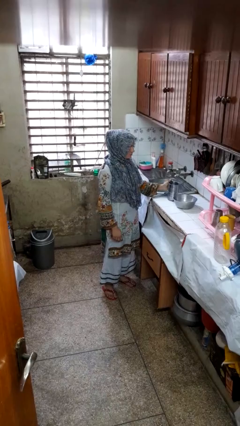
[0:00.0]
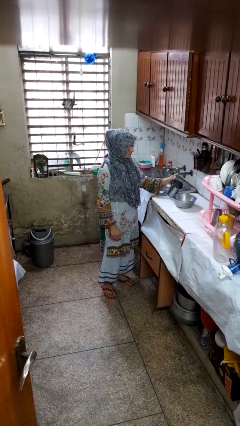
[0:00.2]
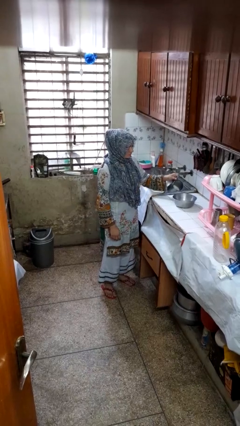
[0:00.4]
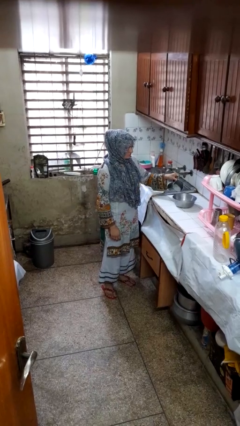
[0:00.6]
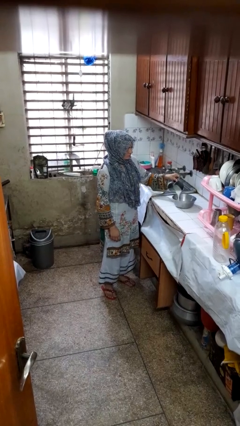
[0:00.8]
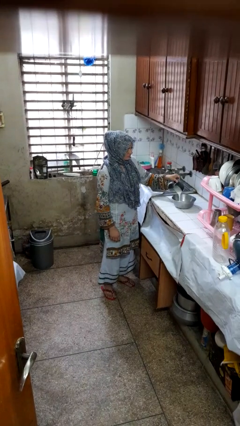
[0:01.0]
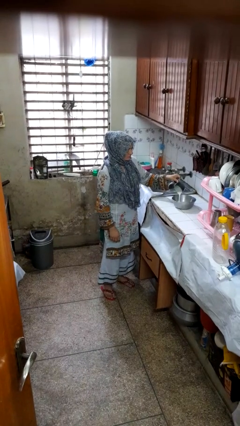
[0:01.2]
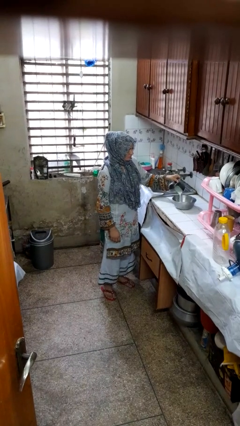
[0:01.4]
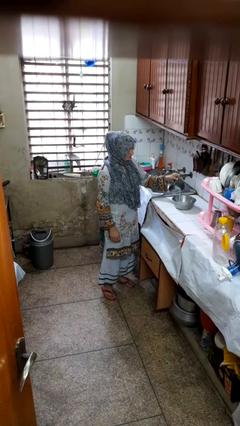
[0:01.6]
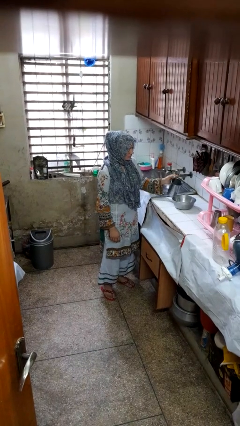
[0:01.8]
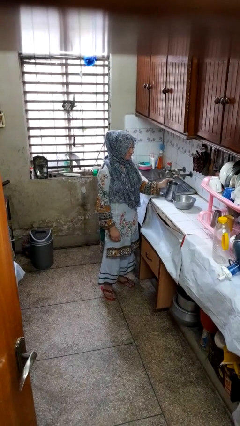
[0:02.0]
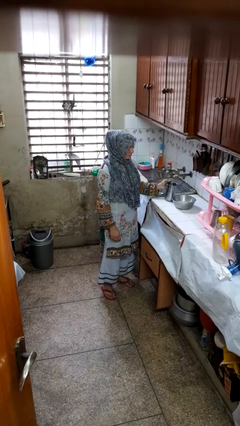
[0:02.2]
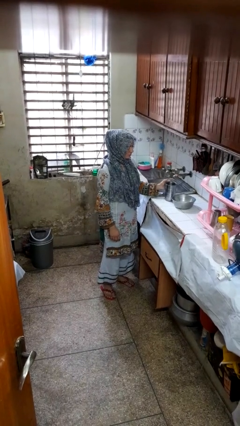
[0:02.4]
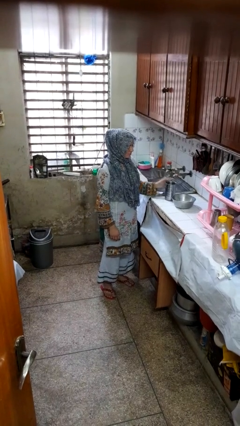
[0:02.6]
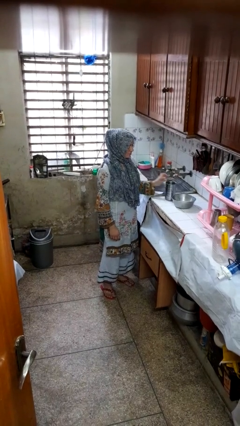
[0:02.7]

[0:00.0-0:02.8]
person pours into bowl

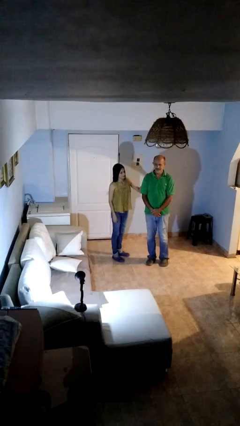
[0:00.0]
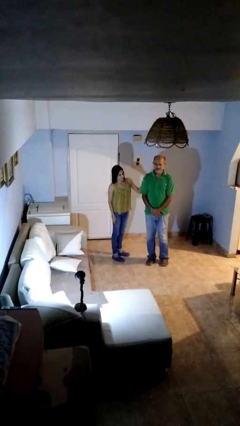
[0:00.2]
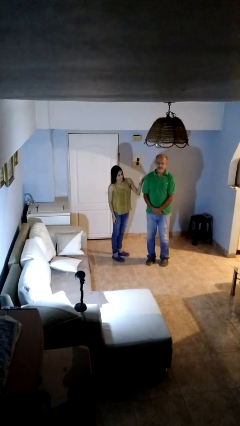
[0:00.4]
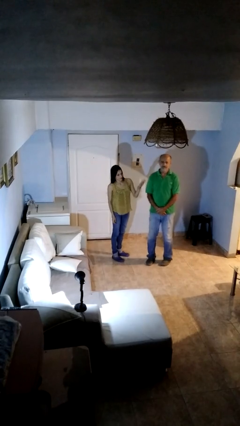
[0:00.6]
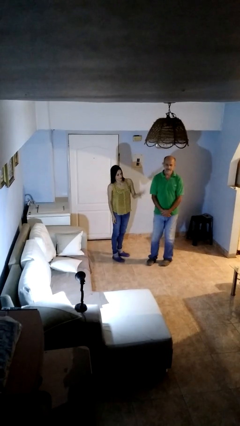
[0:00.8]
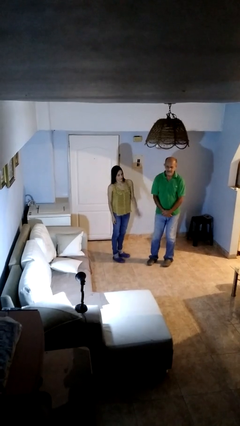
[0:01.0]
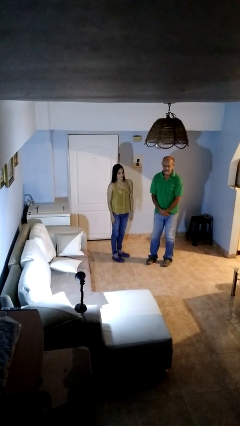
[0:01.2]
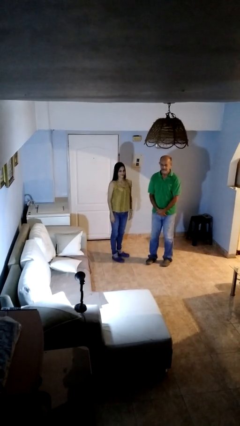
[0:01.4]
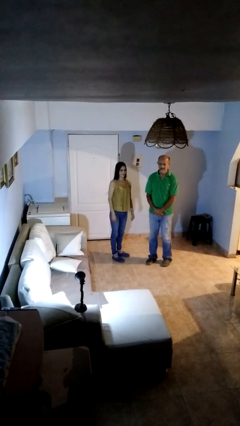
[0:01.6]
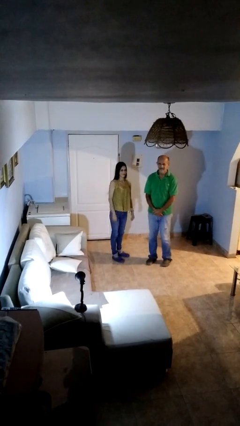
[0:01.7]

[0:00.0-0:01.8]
person shoves person

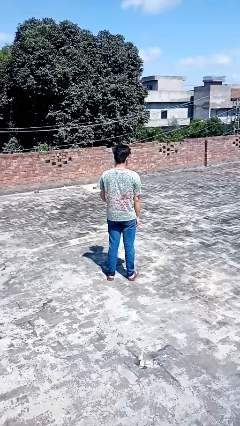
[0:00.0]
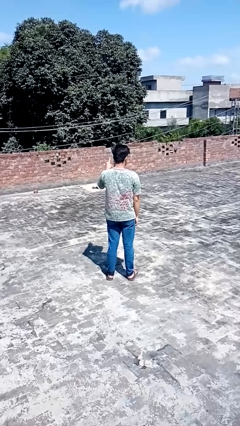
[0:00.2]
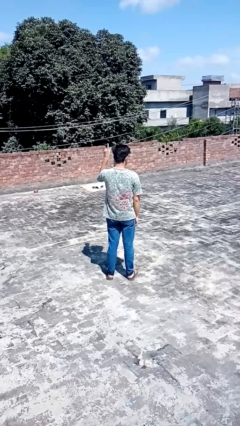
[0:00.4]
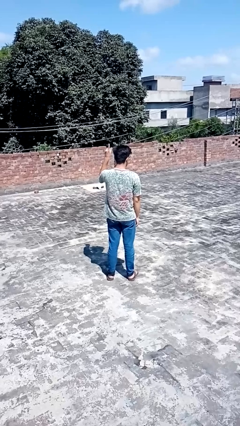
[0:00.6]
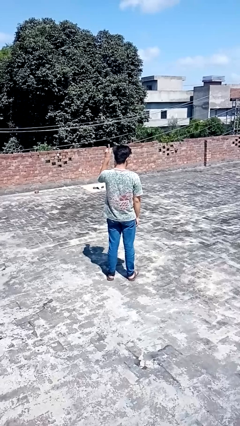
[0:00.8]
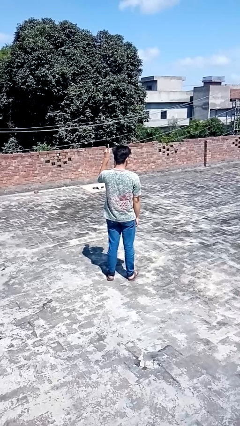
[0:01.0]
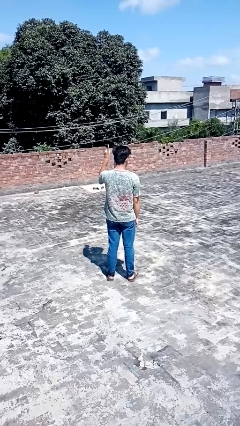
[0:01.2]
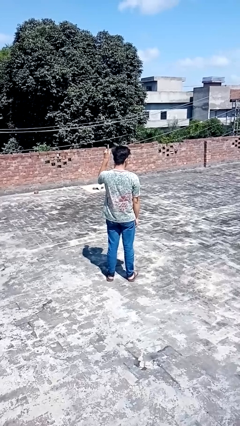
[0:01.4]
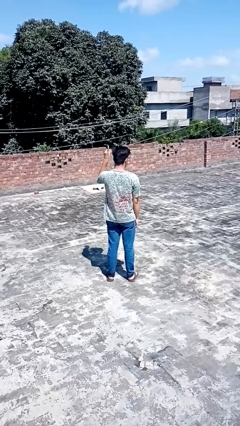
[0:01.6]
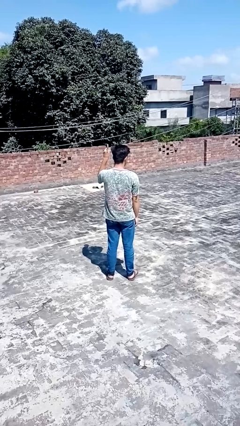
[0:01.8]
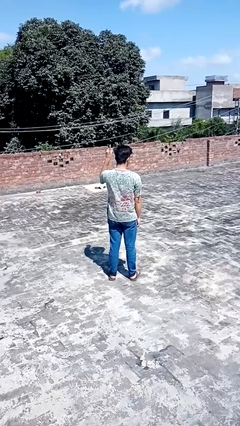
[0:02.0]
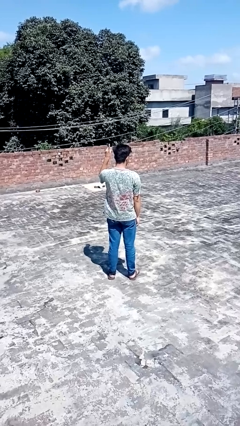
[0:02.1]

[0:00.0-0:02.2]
person gestures number one

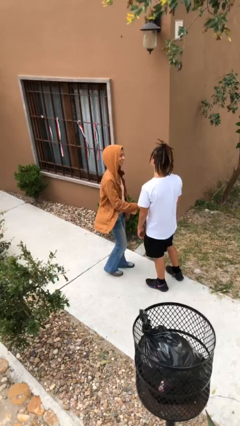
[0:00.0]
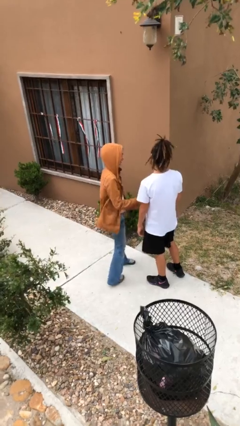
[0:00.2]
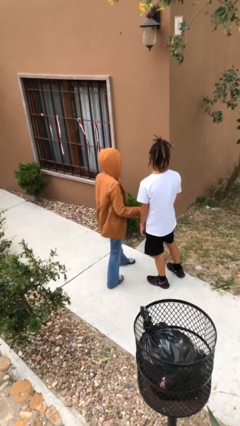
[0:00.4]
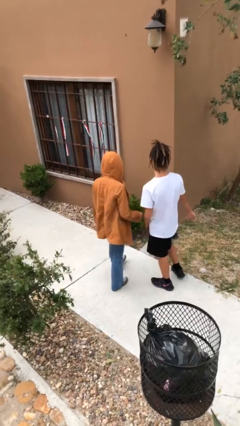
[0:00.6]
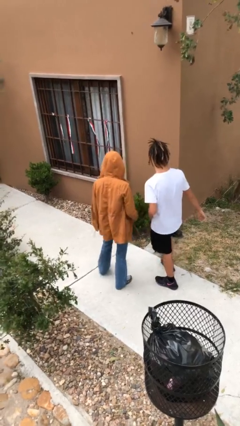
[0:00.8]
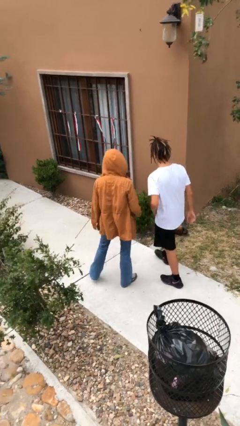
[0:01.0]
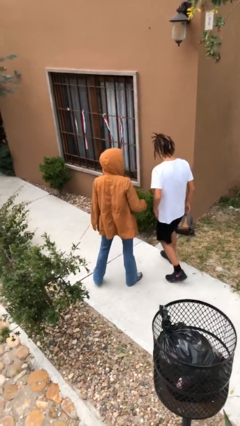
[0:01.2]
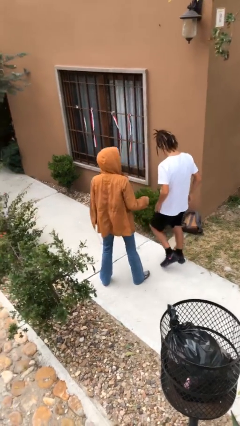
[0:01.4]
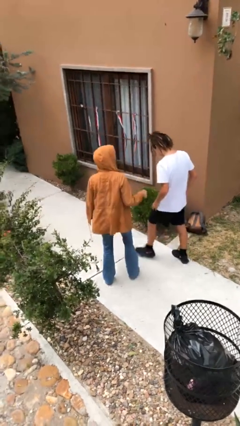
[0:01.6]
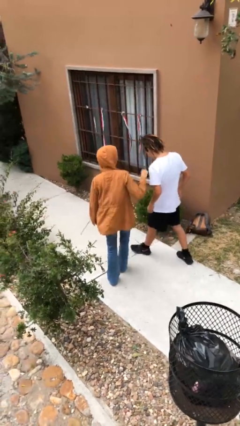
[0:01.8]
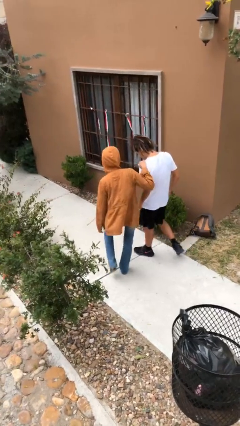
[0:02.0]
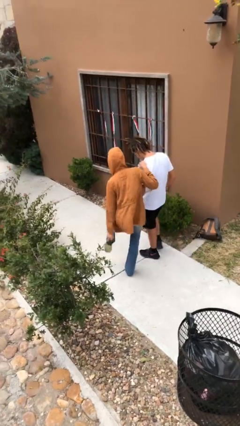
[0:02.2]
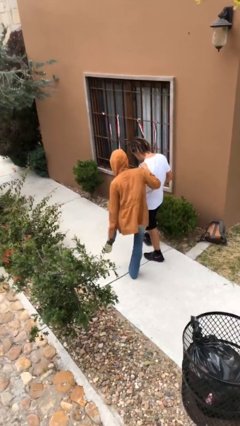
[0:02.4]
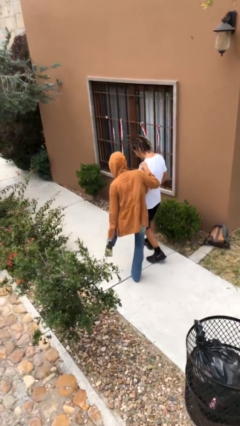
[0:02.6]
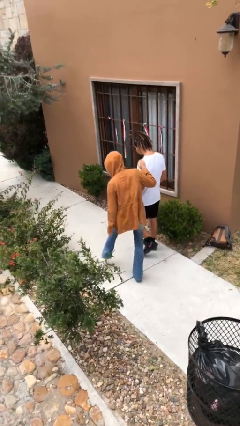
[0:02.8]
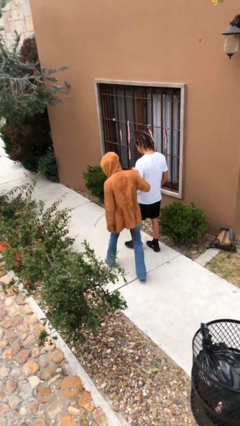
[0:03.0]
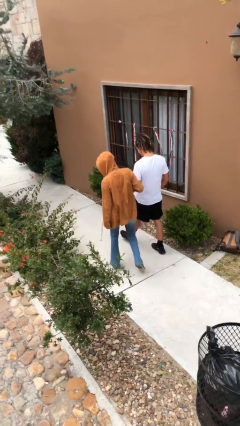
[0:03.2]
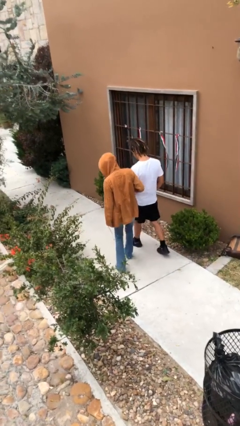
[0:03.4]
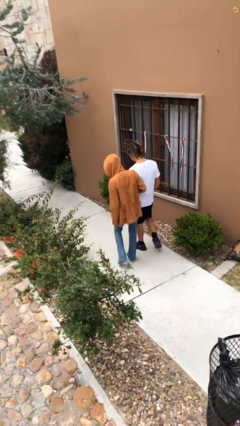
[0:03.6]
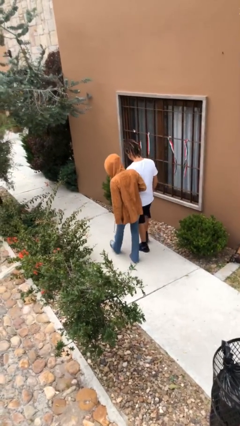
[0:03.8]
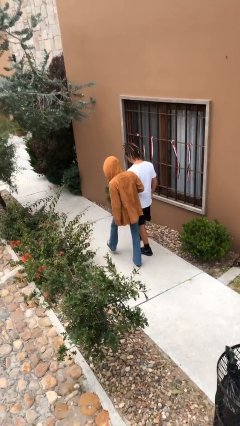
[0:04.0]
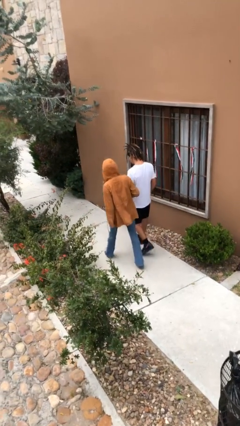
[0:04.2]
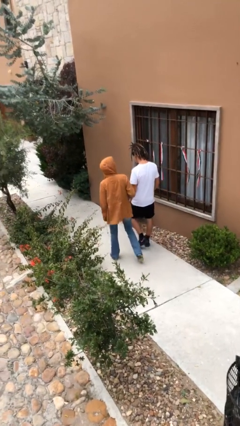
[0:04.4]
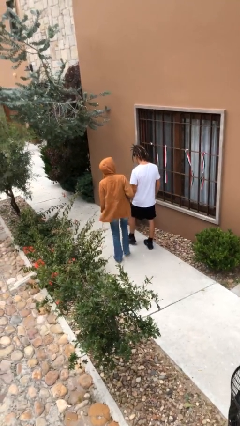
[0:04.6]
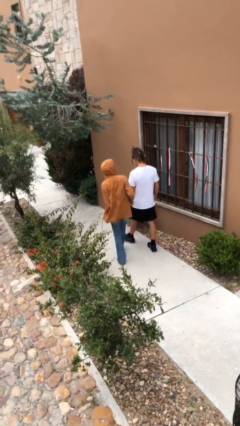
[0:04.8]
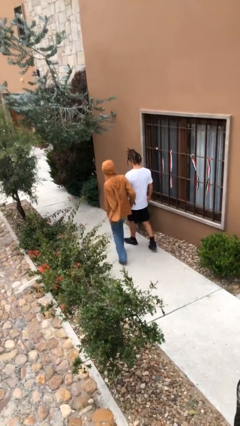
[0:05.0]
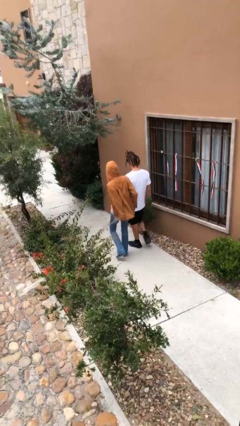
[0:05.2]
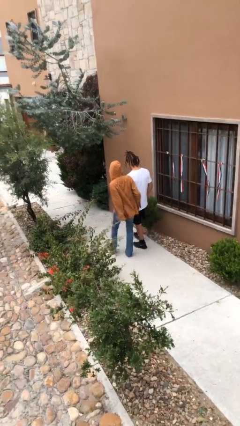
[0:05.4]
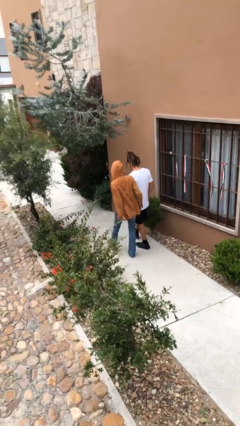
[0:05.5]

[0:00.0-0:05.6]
person talks to person

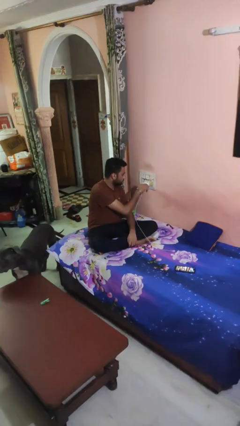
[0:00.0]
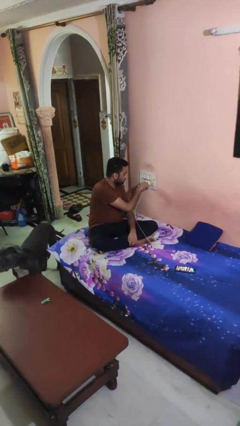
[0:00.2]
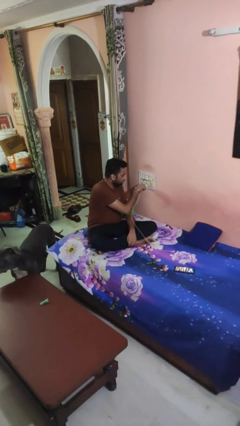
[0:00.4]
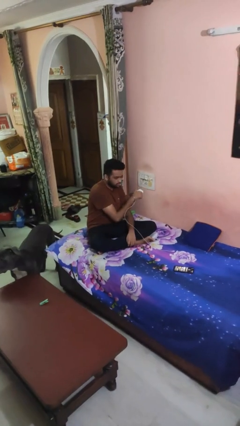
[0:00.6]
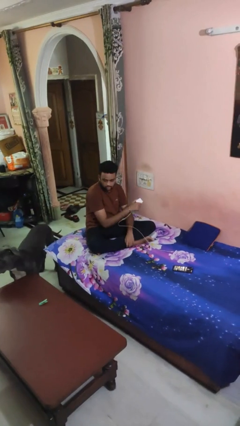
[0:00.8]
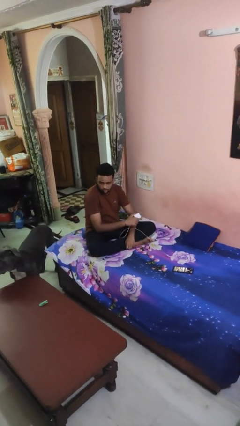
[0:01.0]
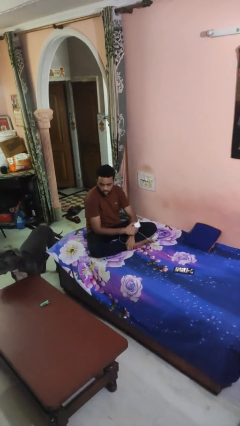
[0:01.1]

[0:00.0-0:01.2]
person unplugs from electrical socket

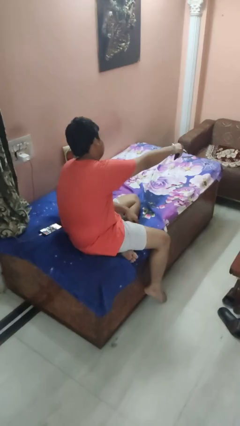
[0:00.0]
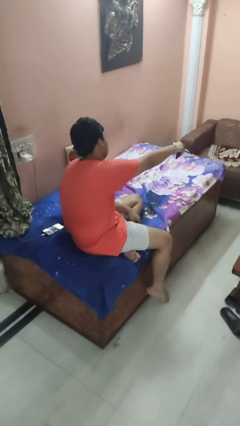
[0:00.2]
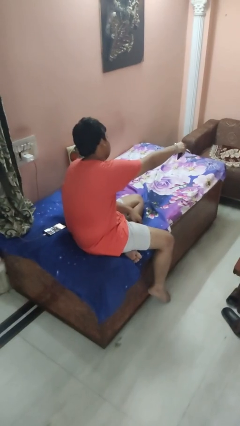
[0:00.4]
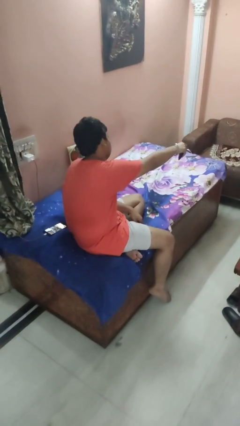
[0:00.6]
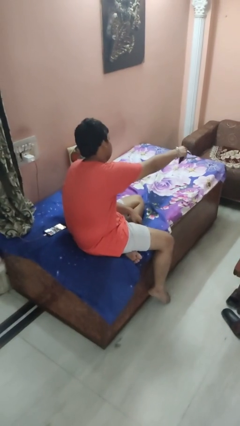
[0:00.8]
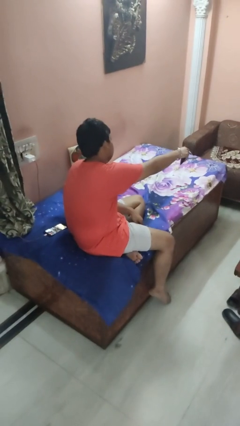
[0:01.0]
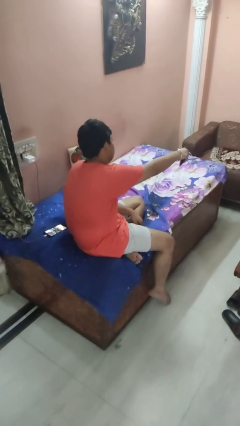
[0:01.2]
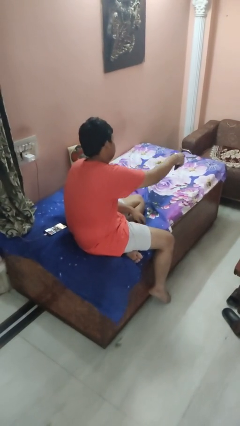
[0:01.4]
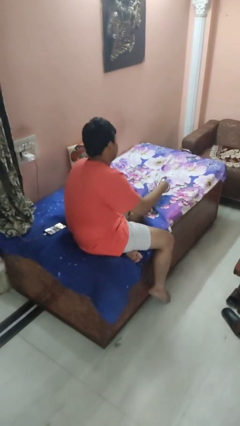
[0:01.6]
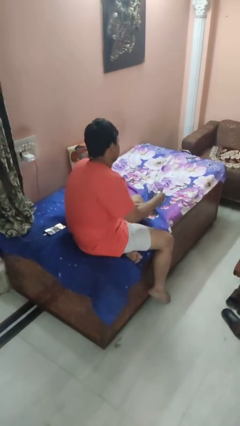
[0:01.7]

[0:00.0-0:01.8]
person uses television remote

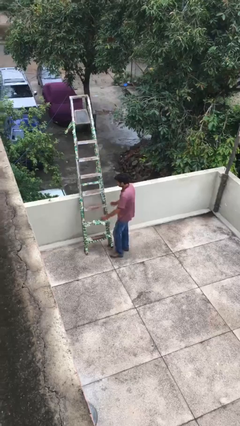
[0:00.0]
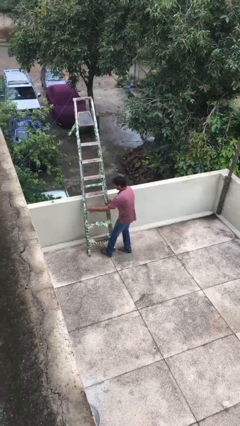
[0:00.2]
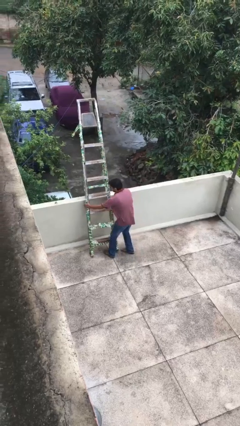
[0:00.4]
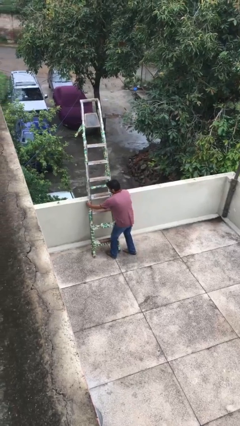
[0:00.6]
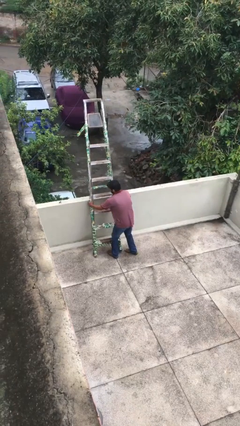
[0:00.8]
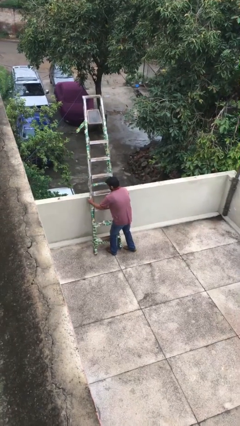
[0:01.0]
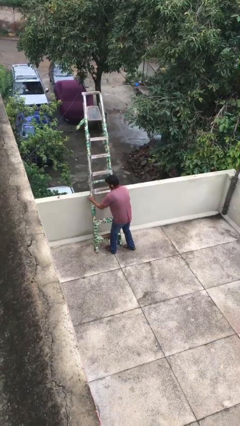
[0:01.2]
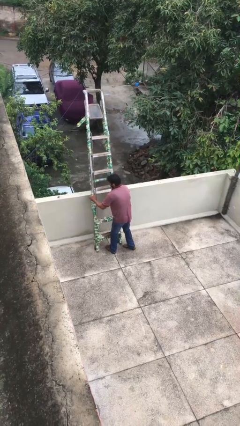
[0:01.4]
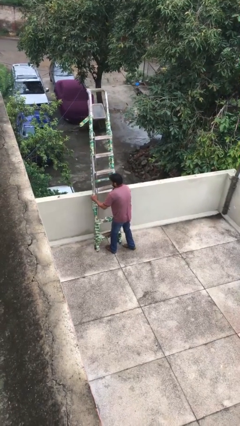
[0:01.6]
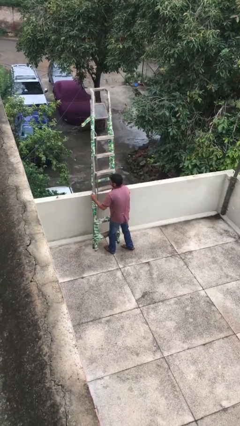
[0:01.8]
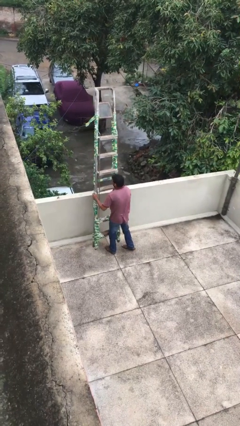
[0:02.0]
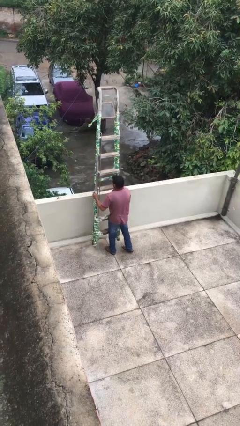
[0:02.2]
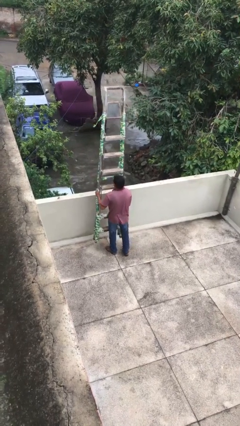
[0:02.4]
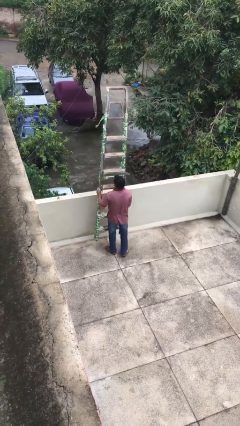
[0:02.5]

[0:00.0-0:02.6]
person picks up object from floor
